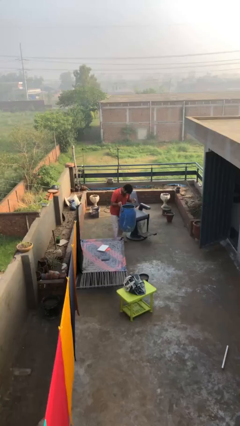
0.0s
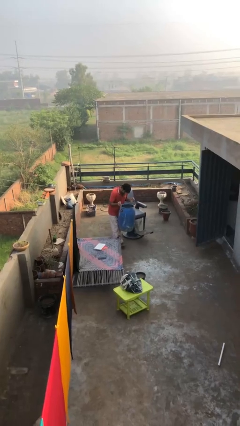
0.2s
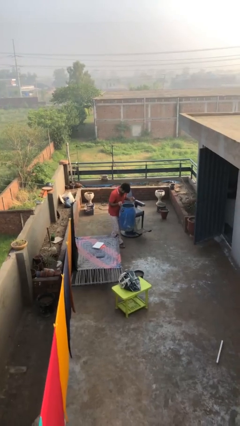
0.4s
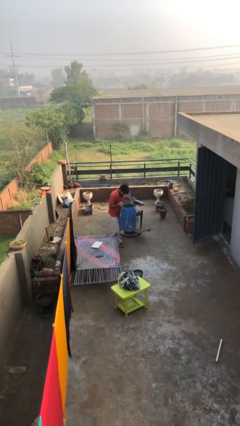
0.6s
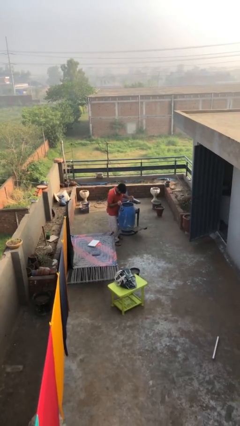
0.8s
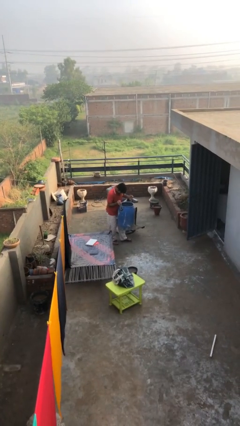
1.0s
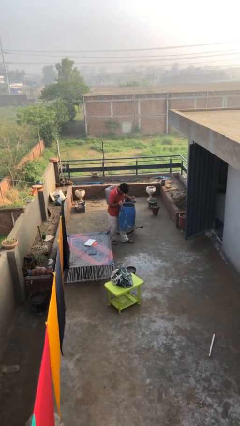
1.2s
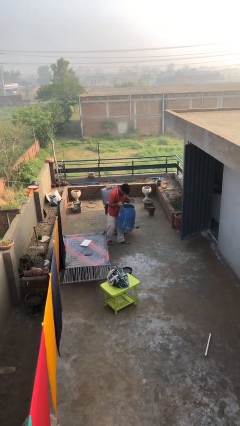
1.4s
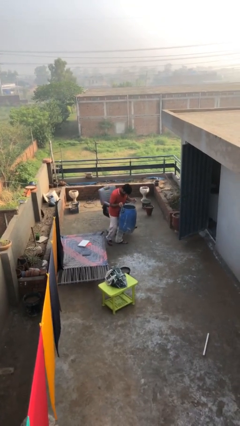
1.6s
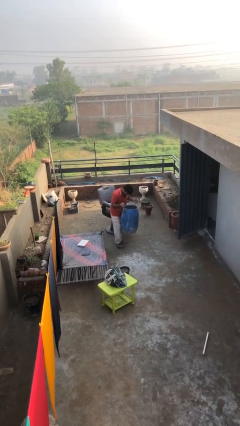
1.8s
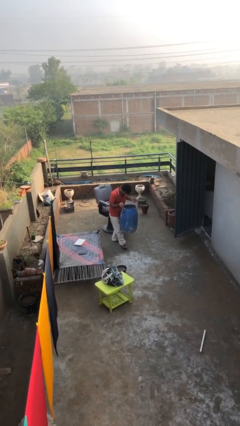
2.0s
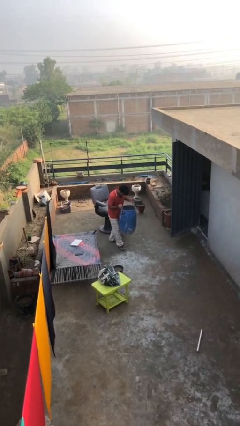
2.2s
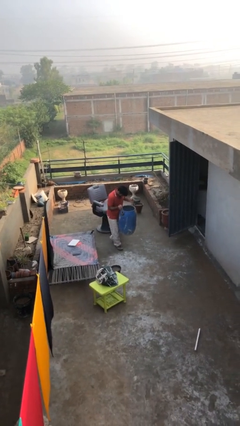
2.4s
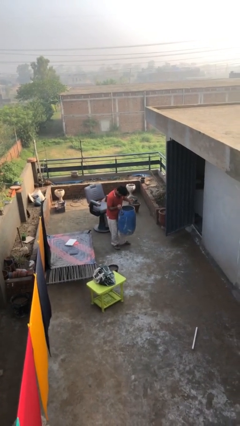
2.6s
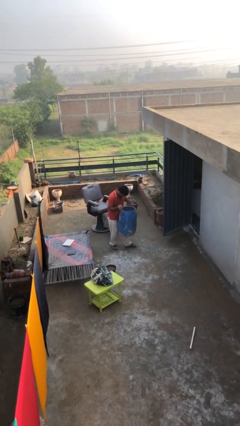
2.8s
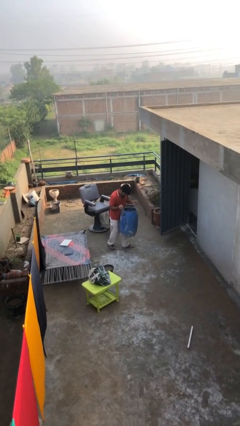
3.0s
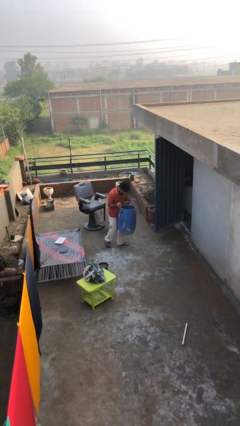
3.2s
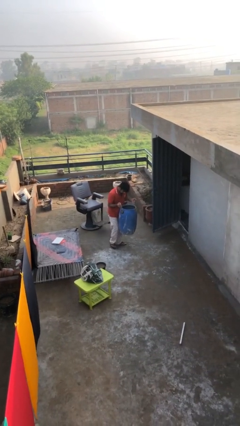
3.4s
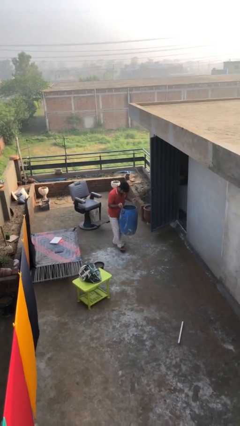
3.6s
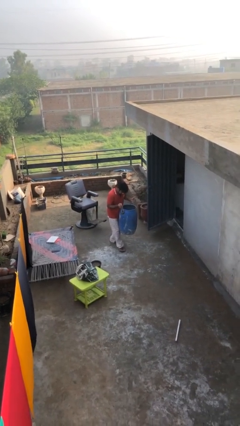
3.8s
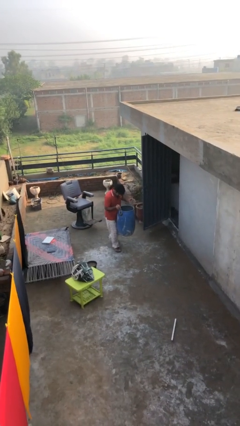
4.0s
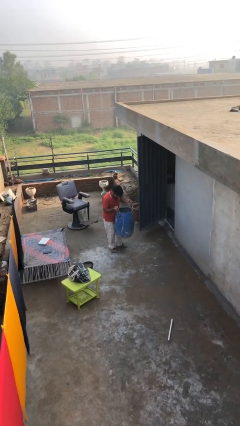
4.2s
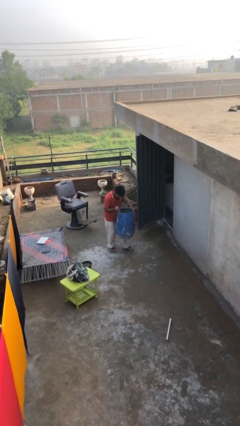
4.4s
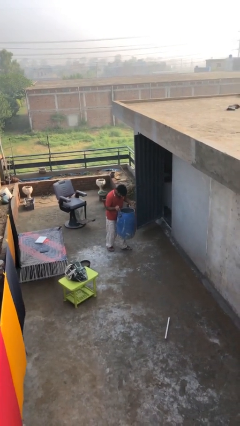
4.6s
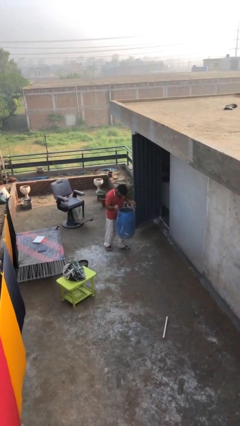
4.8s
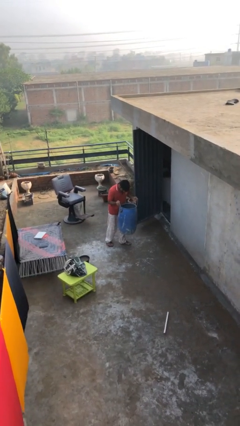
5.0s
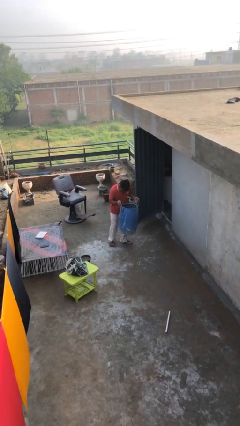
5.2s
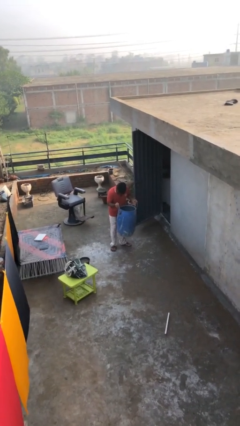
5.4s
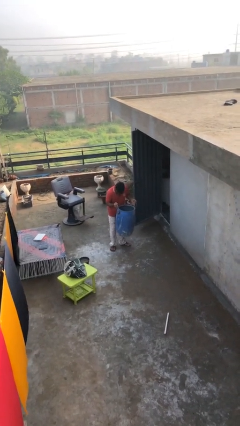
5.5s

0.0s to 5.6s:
person carries heavy object

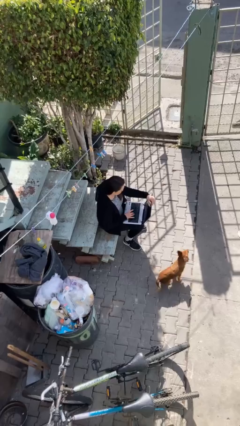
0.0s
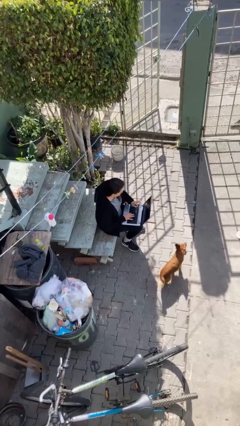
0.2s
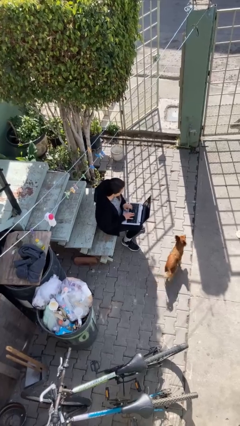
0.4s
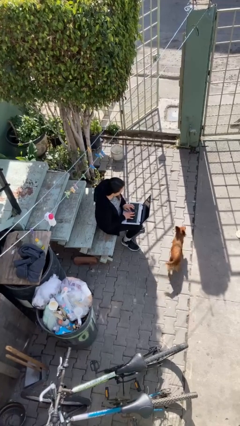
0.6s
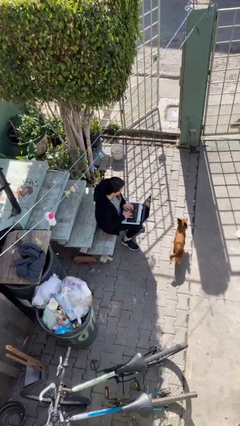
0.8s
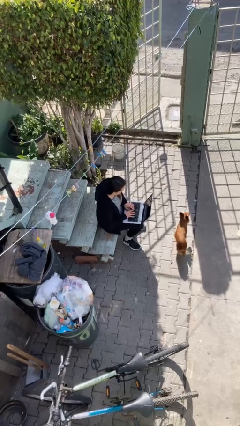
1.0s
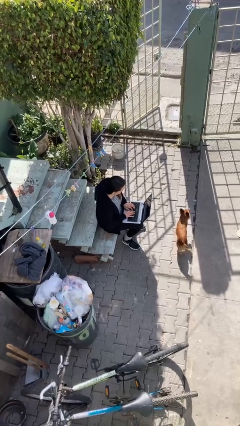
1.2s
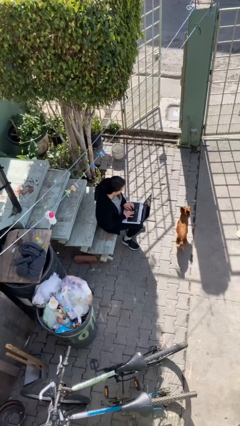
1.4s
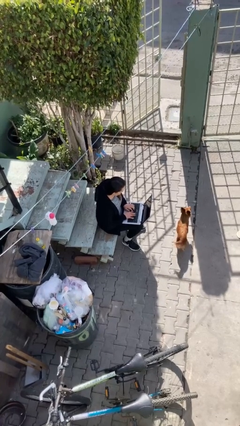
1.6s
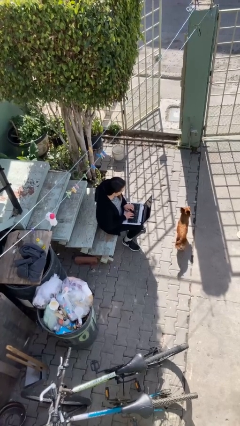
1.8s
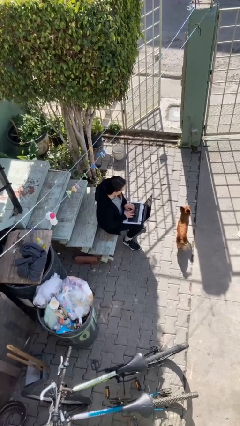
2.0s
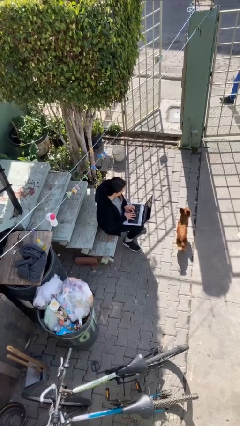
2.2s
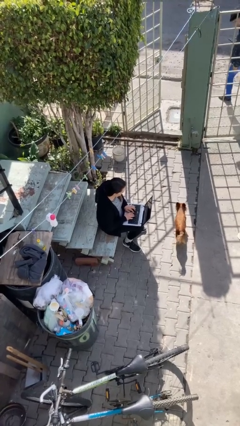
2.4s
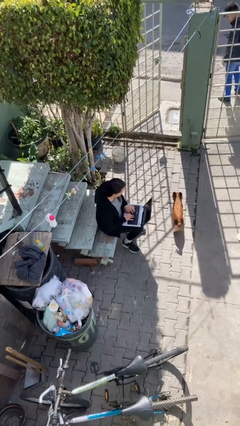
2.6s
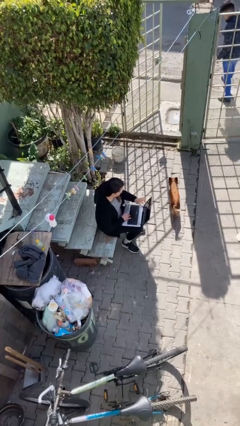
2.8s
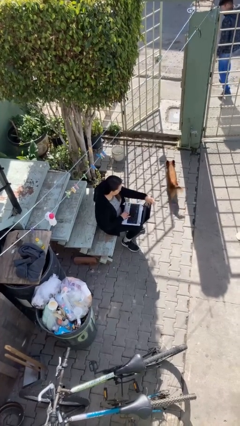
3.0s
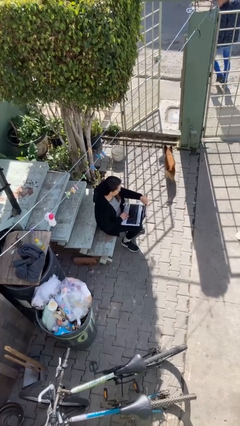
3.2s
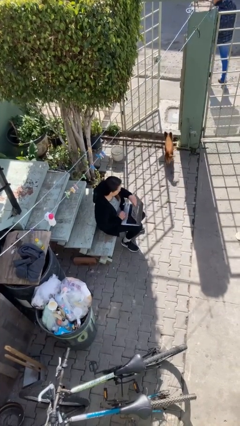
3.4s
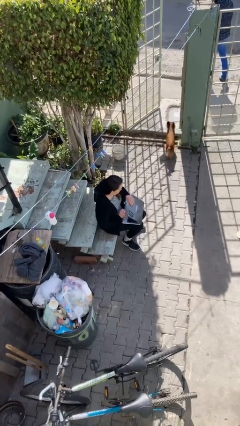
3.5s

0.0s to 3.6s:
person interacts with laptop

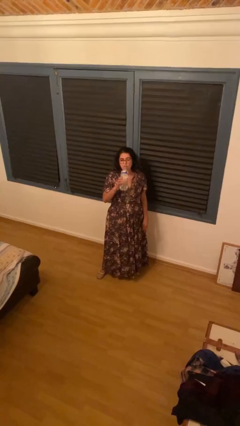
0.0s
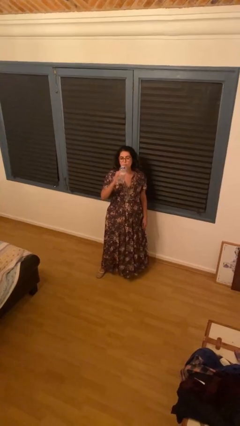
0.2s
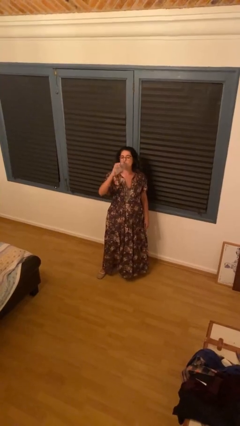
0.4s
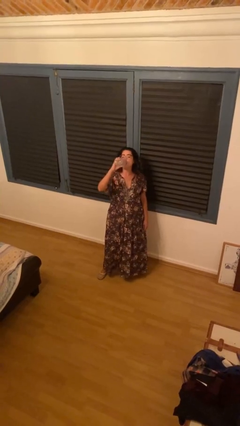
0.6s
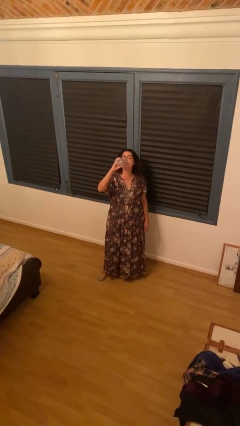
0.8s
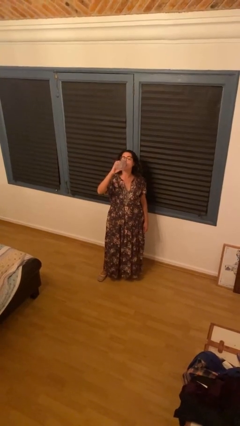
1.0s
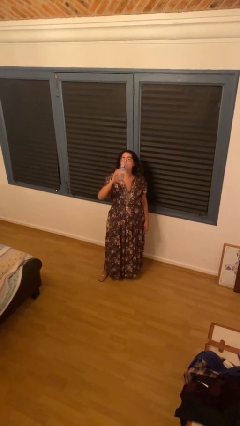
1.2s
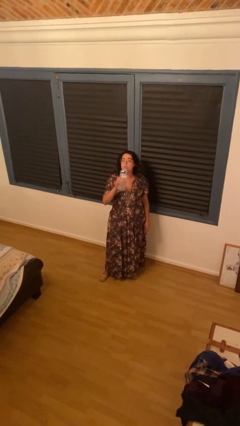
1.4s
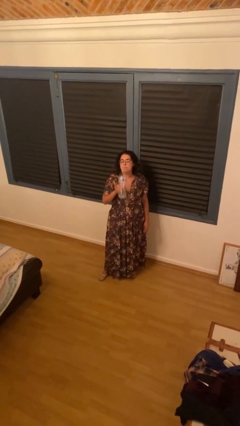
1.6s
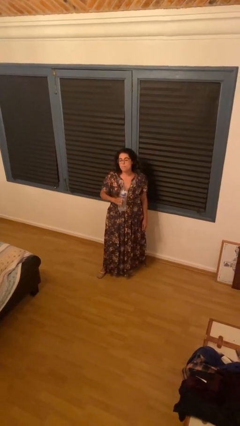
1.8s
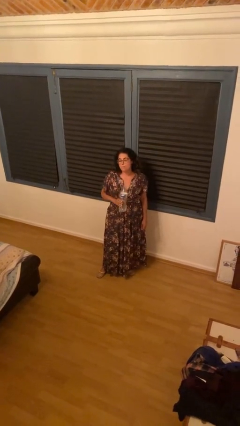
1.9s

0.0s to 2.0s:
person drinks from bottle

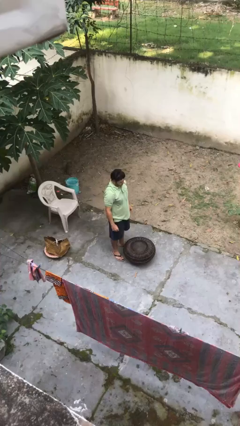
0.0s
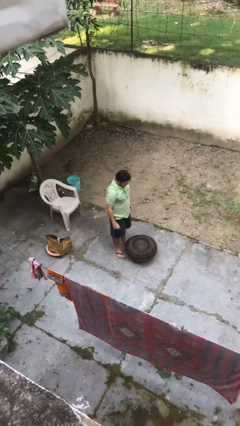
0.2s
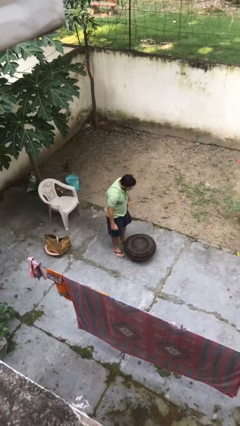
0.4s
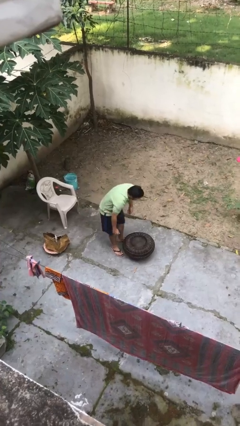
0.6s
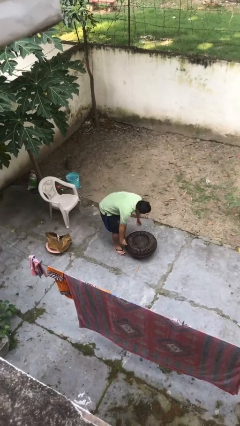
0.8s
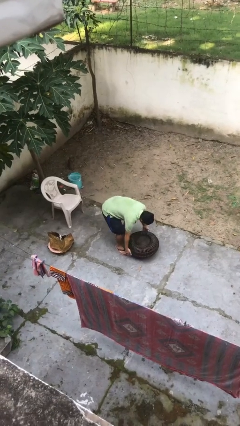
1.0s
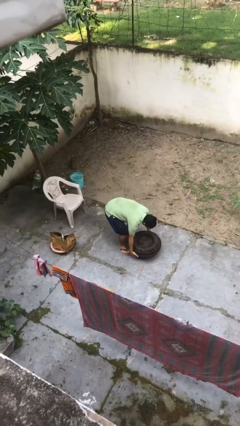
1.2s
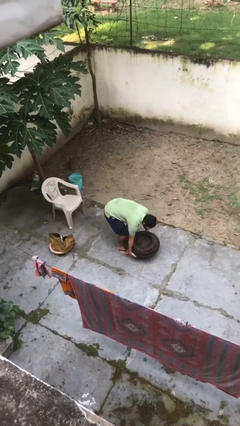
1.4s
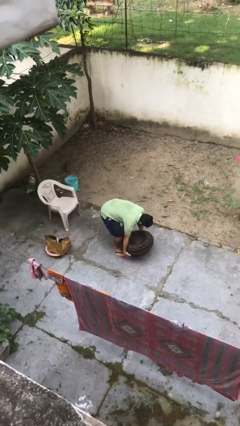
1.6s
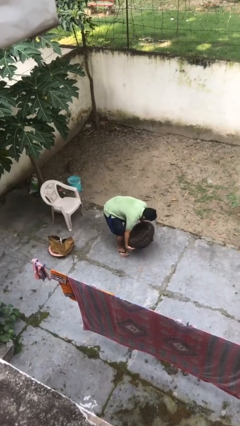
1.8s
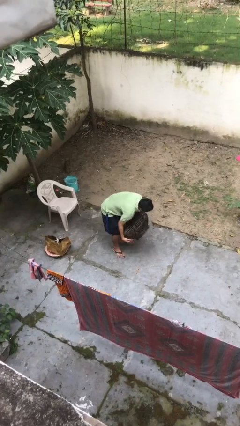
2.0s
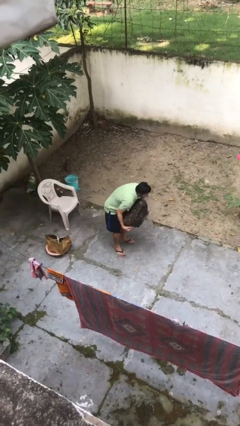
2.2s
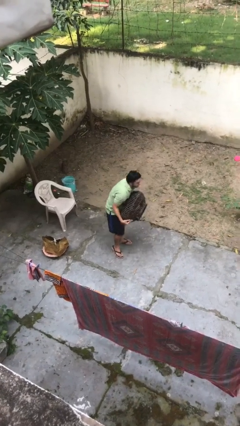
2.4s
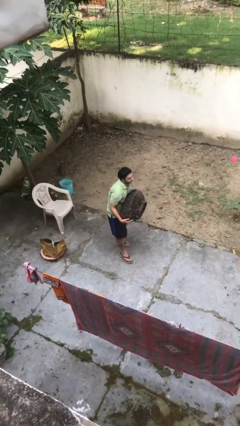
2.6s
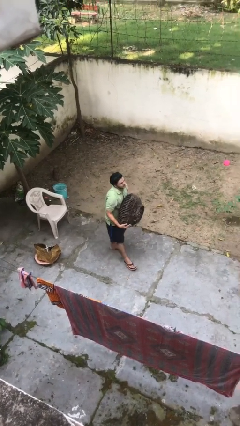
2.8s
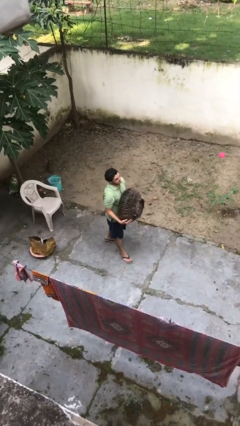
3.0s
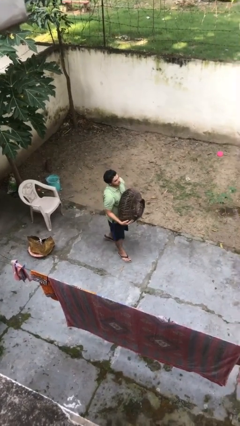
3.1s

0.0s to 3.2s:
person picks up object from floor

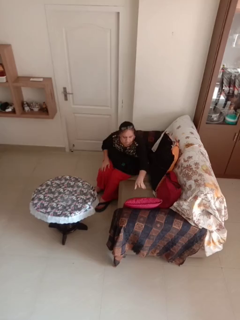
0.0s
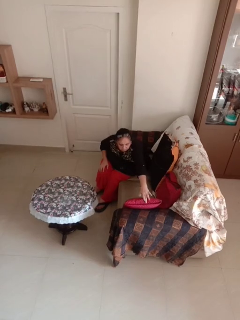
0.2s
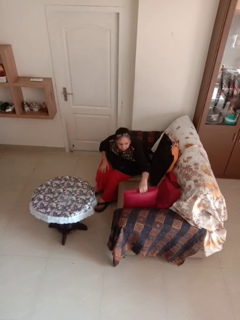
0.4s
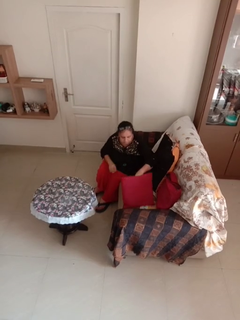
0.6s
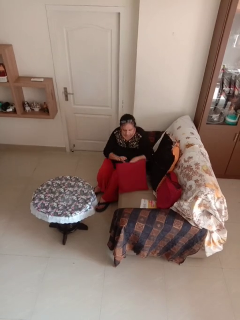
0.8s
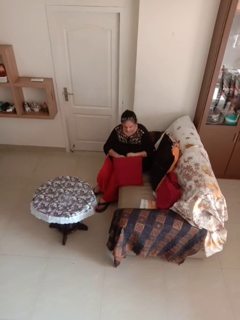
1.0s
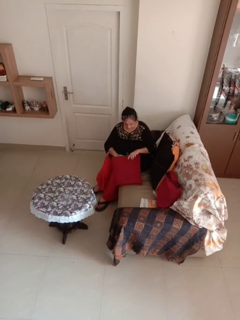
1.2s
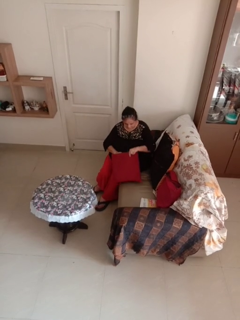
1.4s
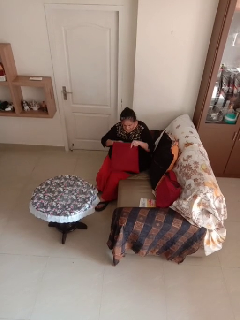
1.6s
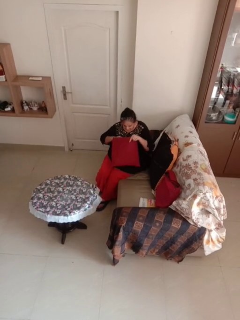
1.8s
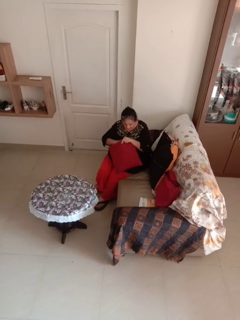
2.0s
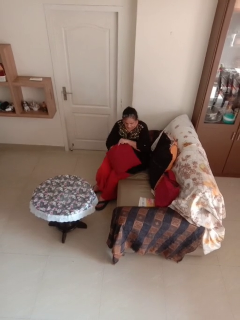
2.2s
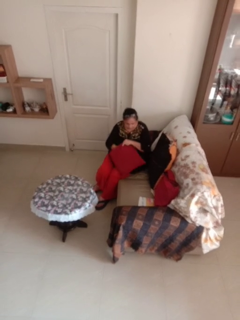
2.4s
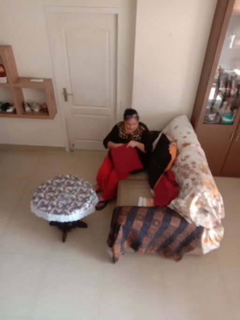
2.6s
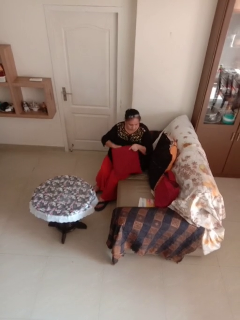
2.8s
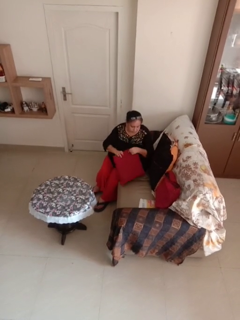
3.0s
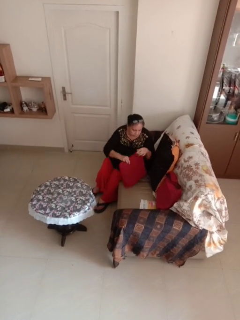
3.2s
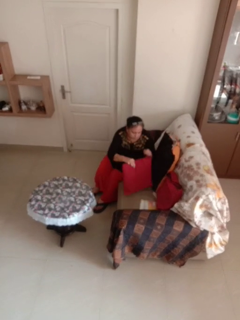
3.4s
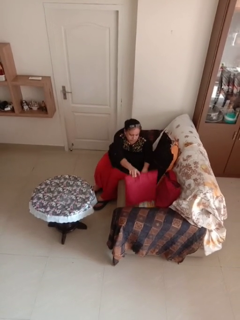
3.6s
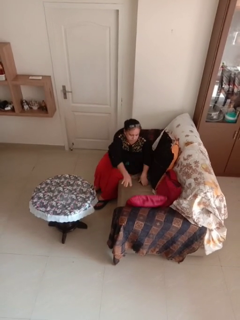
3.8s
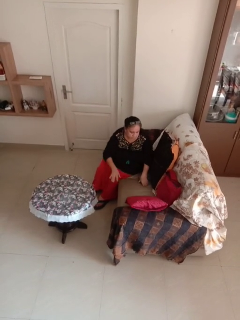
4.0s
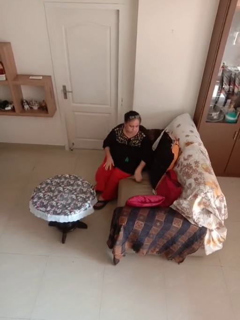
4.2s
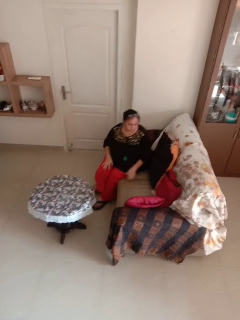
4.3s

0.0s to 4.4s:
person searches in couch
